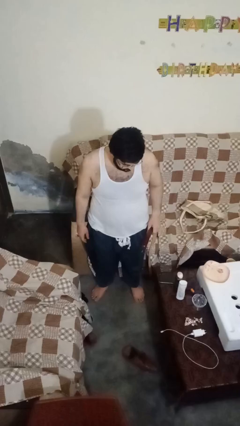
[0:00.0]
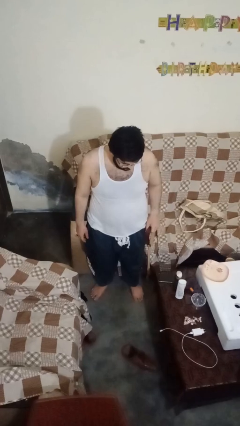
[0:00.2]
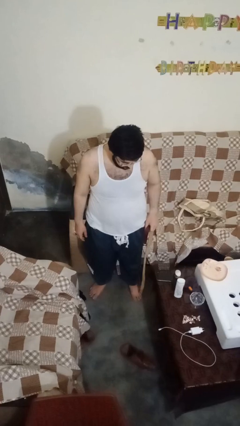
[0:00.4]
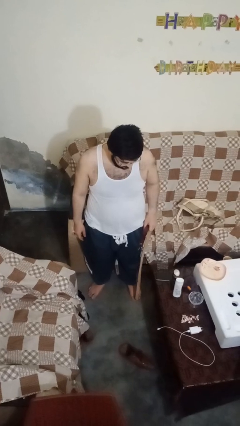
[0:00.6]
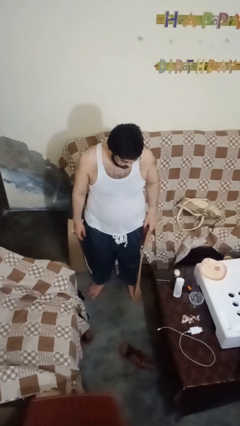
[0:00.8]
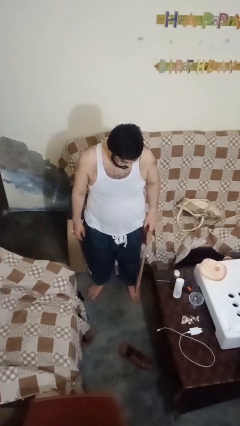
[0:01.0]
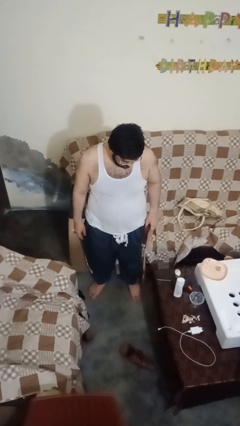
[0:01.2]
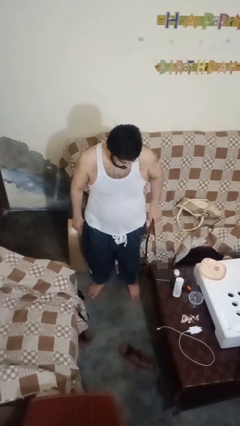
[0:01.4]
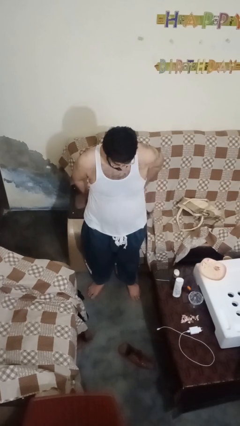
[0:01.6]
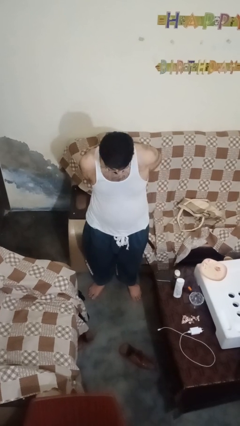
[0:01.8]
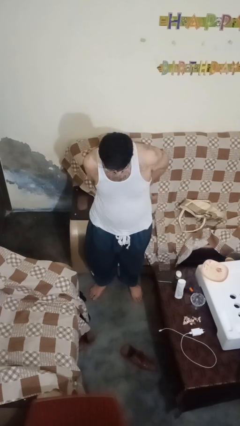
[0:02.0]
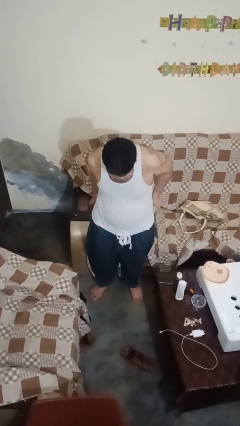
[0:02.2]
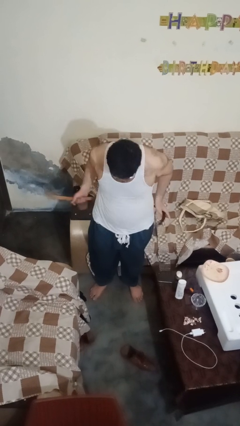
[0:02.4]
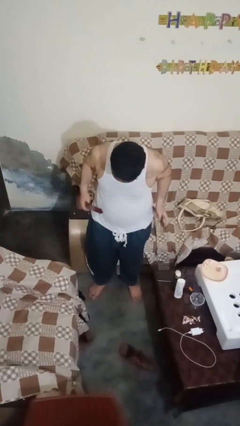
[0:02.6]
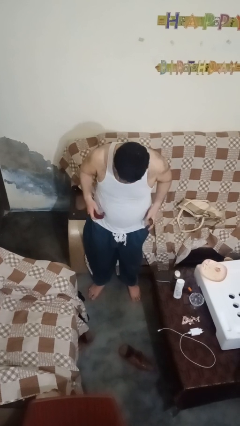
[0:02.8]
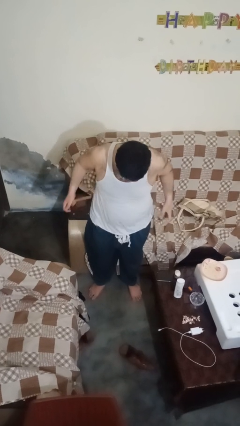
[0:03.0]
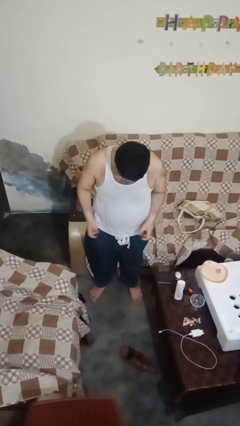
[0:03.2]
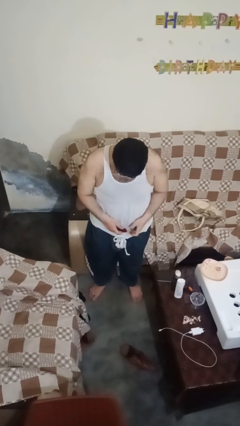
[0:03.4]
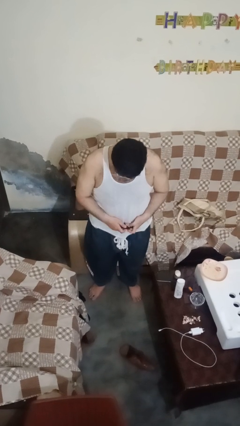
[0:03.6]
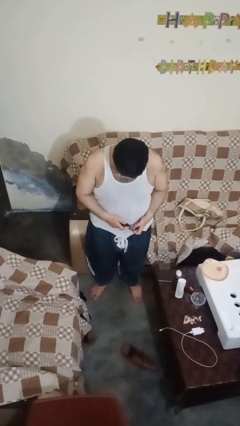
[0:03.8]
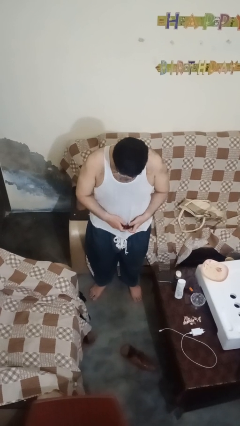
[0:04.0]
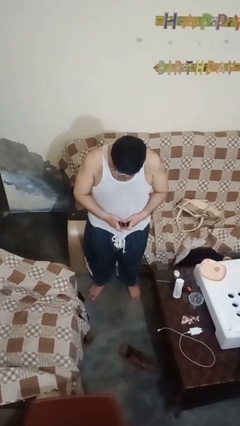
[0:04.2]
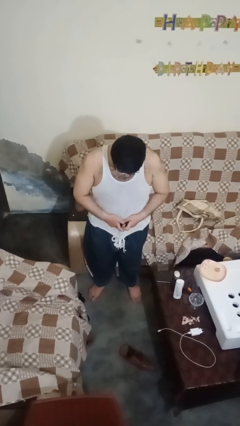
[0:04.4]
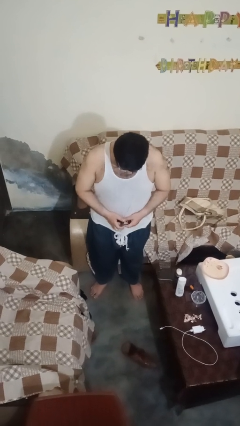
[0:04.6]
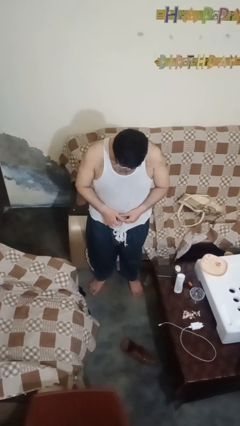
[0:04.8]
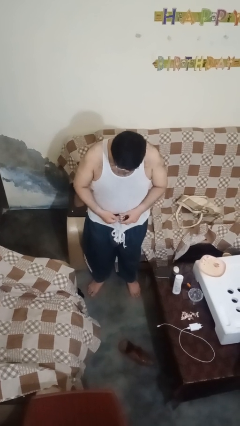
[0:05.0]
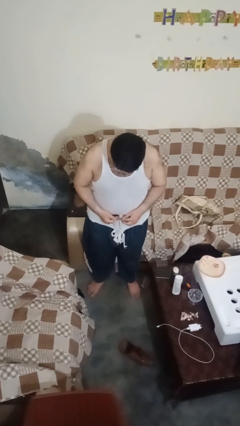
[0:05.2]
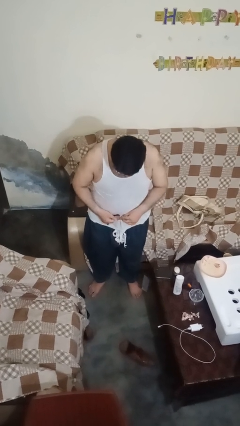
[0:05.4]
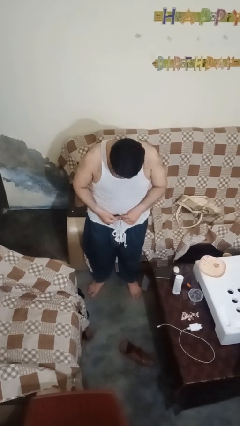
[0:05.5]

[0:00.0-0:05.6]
person puts on belt

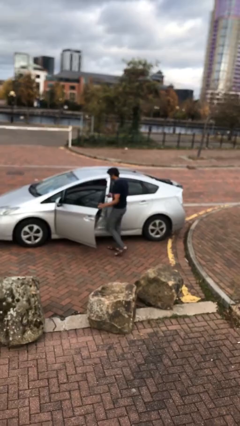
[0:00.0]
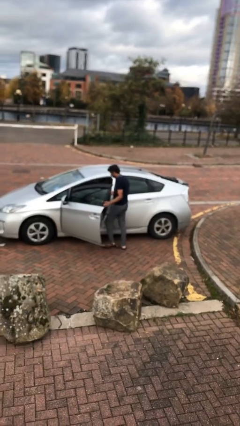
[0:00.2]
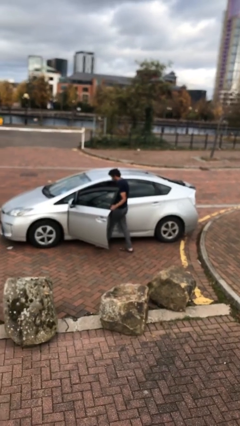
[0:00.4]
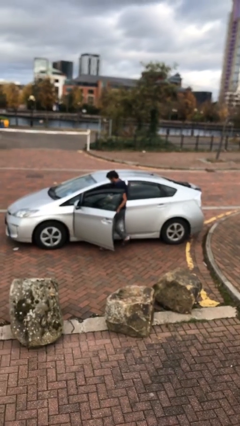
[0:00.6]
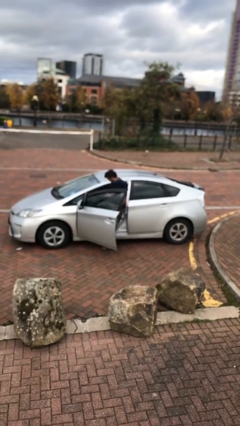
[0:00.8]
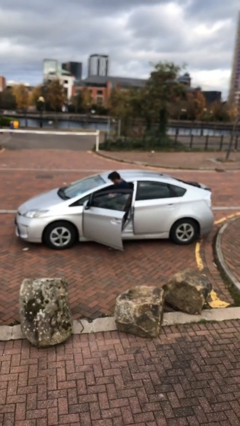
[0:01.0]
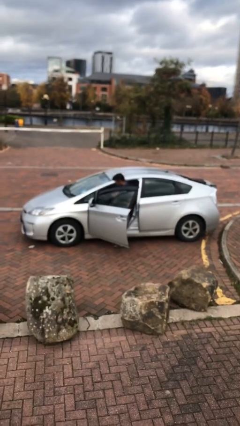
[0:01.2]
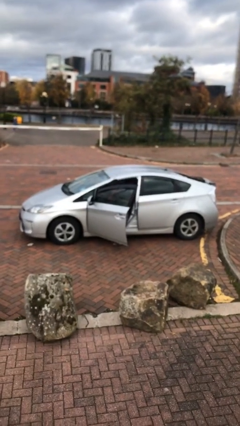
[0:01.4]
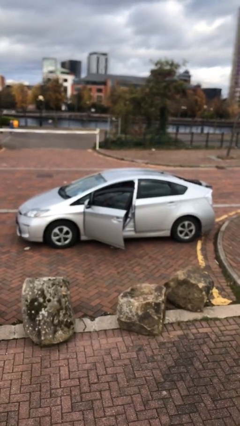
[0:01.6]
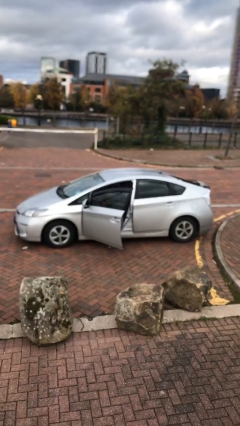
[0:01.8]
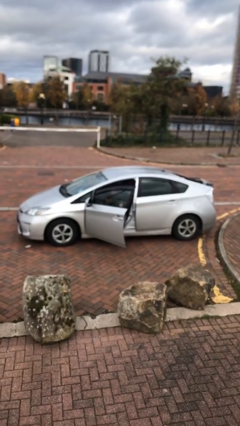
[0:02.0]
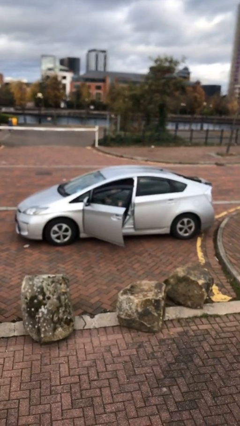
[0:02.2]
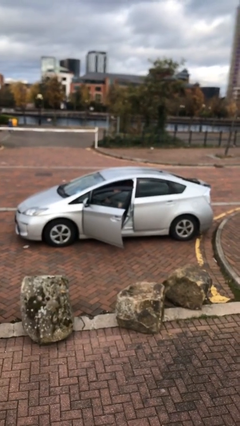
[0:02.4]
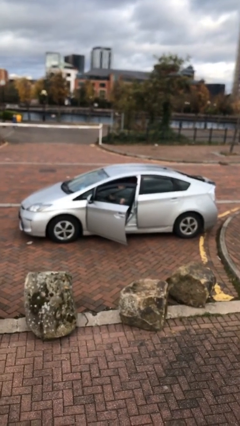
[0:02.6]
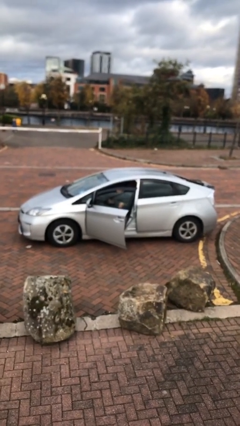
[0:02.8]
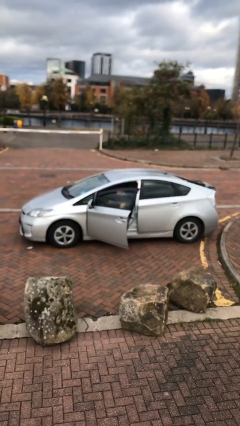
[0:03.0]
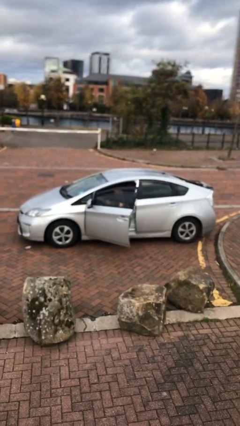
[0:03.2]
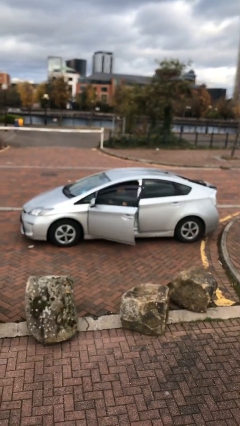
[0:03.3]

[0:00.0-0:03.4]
person enters car

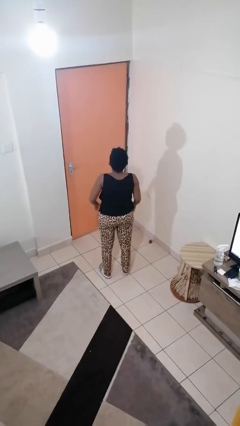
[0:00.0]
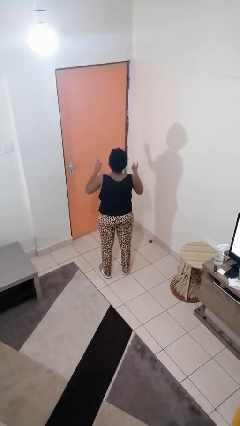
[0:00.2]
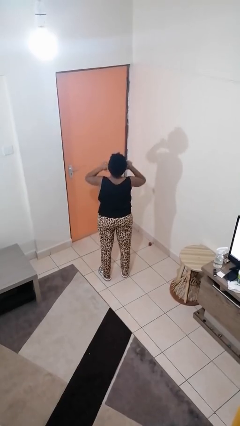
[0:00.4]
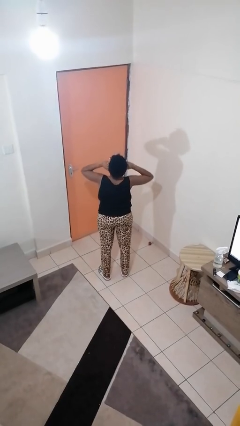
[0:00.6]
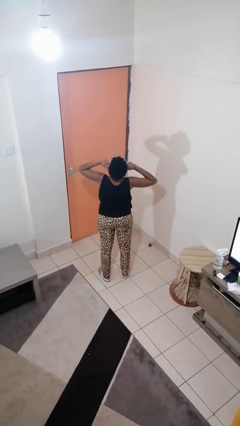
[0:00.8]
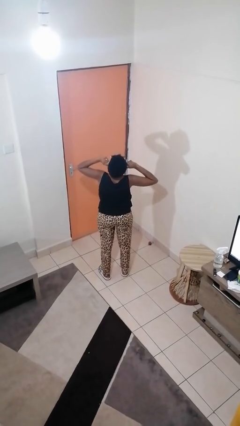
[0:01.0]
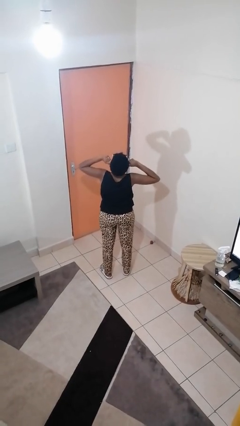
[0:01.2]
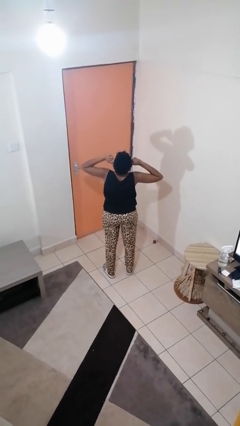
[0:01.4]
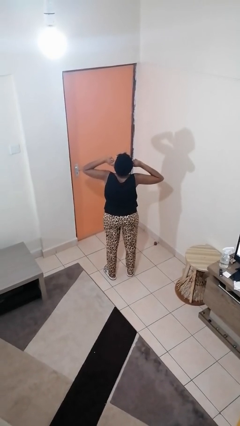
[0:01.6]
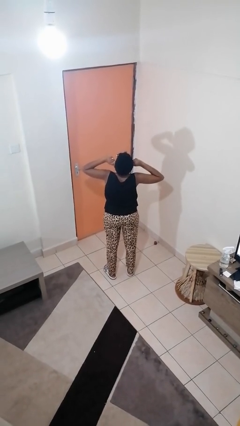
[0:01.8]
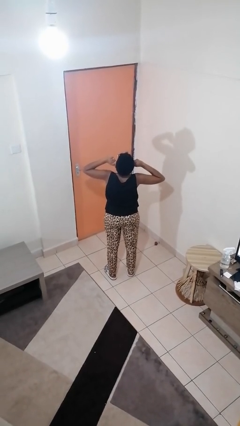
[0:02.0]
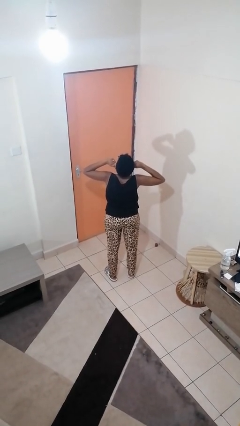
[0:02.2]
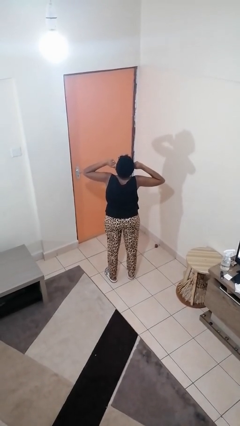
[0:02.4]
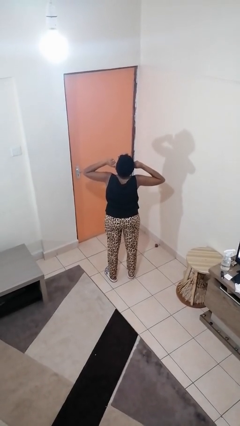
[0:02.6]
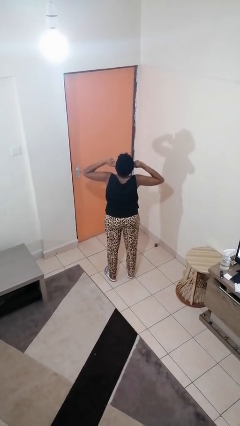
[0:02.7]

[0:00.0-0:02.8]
person puts fingers in ear

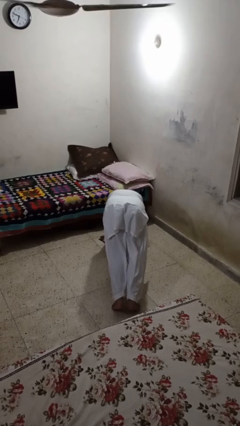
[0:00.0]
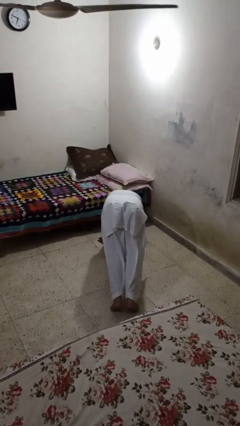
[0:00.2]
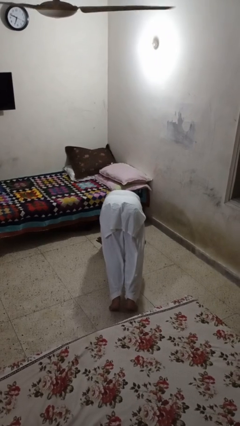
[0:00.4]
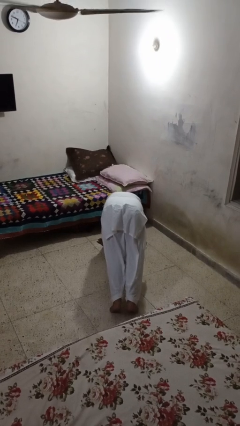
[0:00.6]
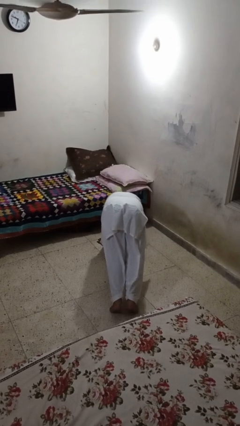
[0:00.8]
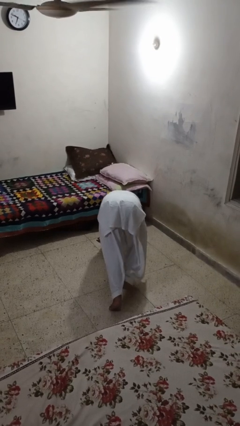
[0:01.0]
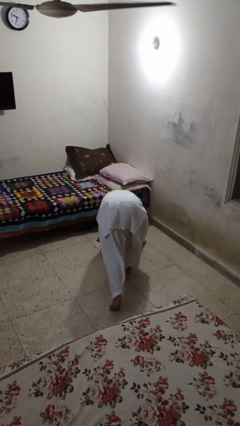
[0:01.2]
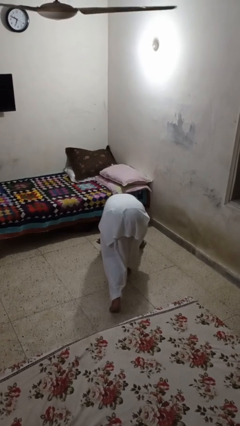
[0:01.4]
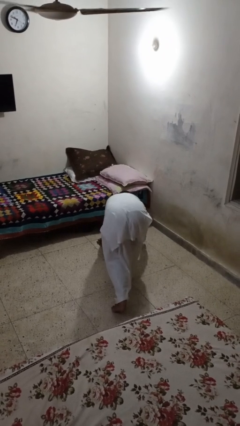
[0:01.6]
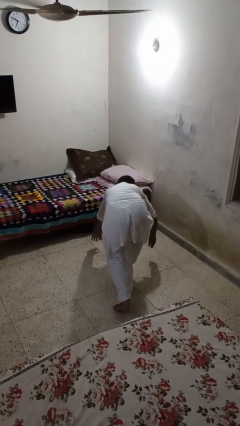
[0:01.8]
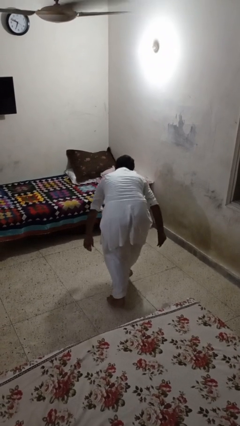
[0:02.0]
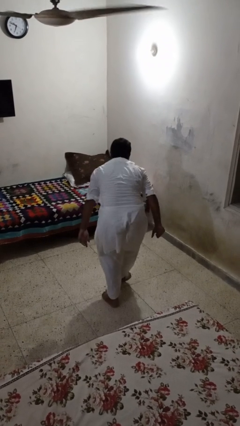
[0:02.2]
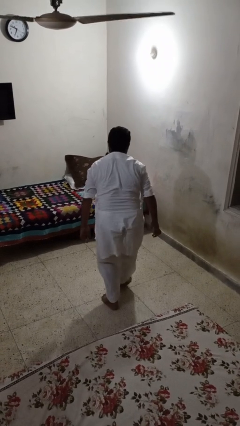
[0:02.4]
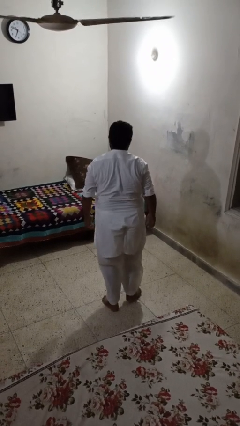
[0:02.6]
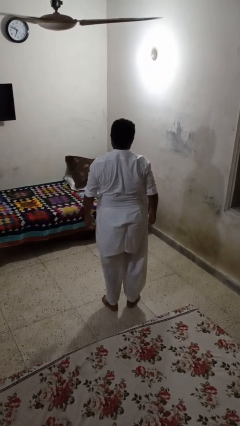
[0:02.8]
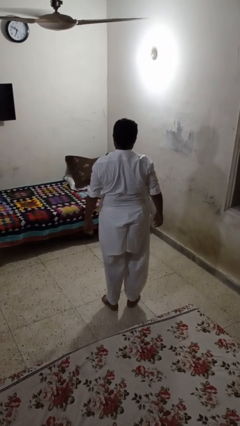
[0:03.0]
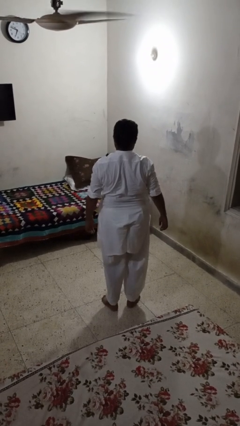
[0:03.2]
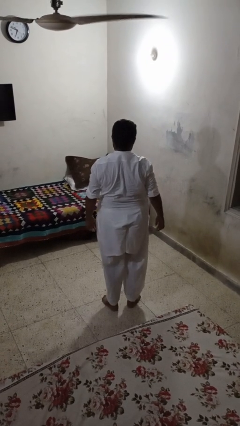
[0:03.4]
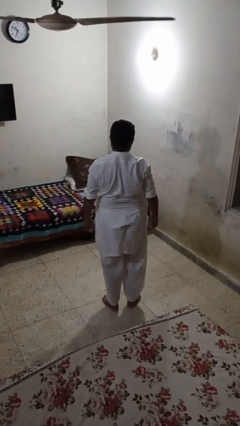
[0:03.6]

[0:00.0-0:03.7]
person stands up from floor

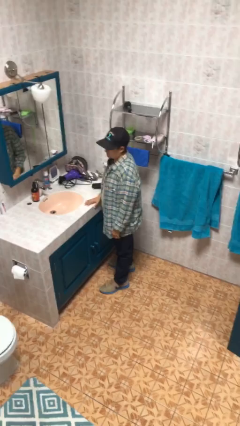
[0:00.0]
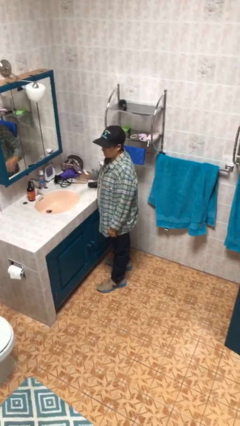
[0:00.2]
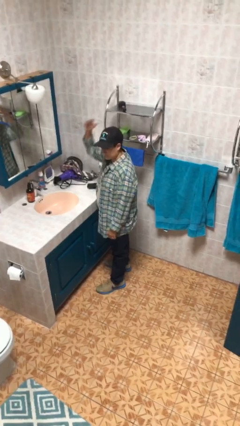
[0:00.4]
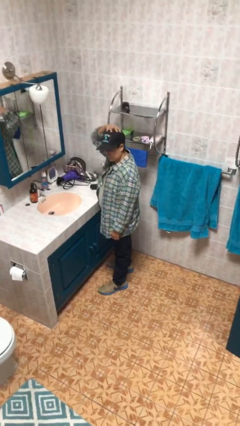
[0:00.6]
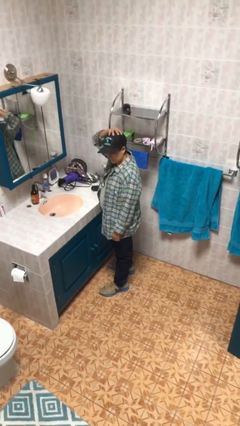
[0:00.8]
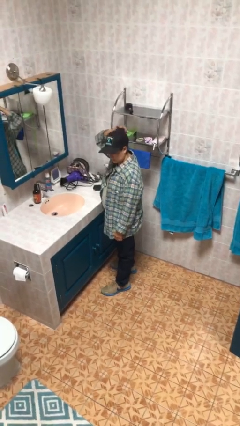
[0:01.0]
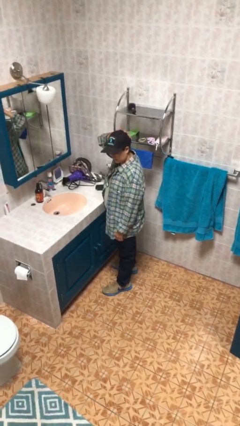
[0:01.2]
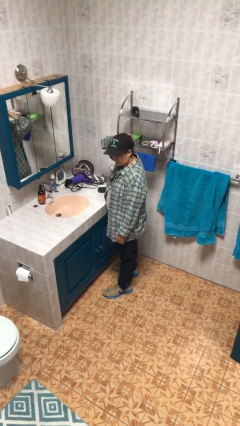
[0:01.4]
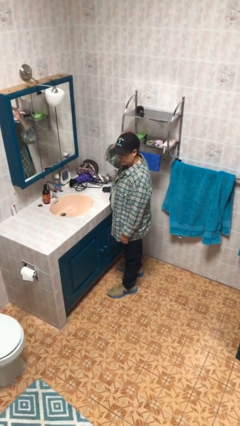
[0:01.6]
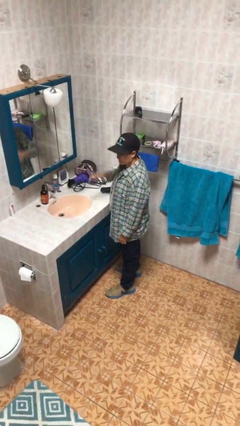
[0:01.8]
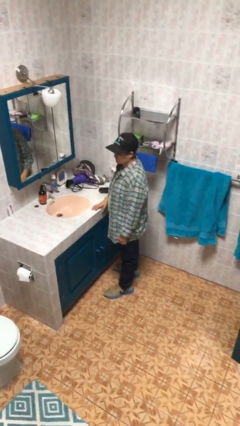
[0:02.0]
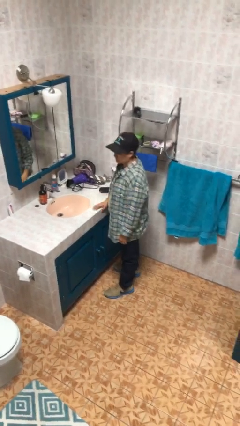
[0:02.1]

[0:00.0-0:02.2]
person pats head
